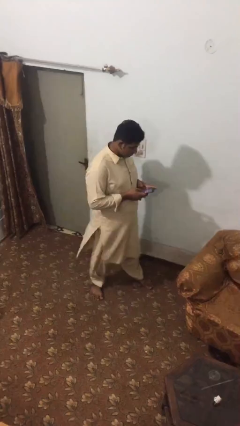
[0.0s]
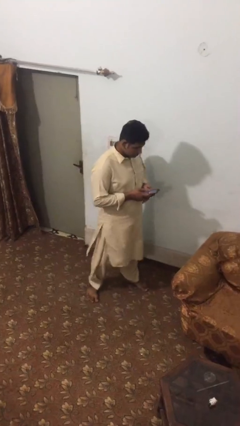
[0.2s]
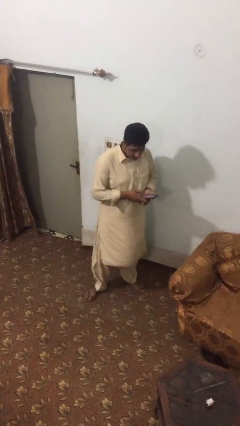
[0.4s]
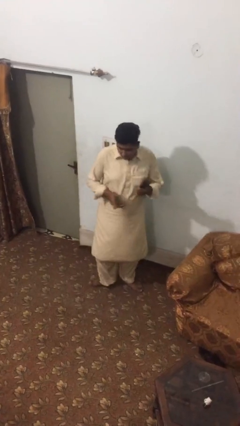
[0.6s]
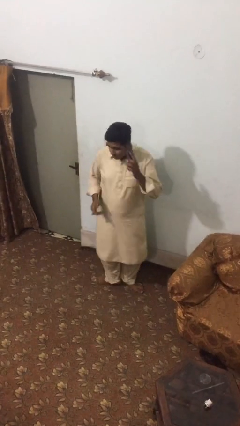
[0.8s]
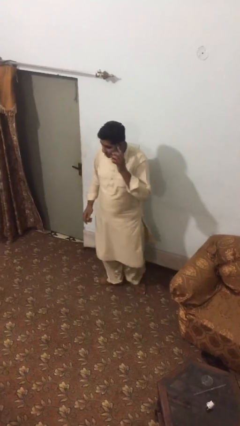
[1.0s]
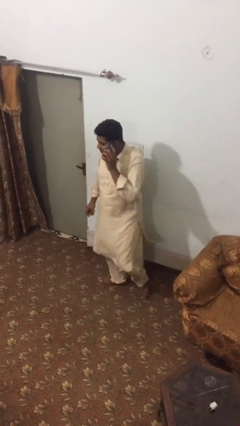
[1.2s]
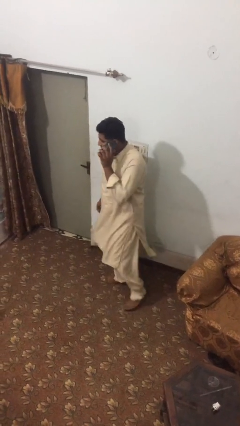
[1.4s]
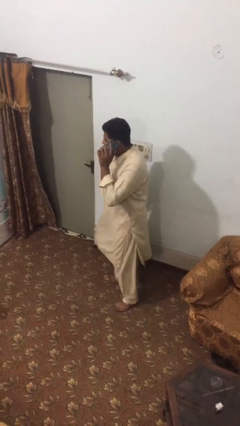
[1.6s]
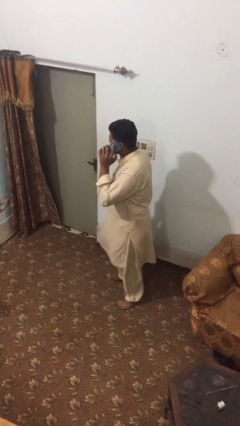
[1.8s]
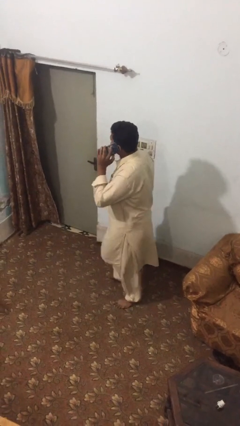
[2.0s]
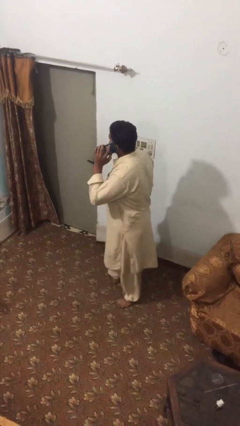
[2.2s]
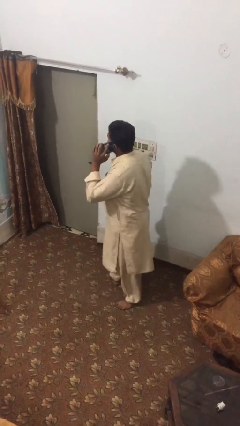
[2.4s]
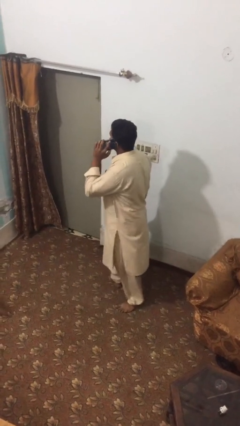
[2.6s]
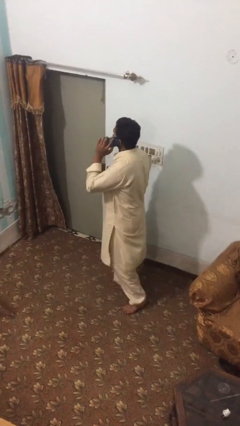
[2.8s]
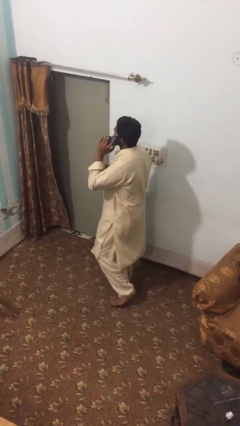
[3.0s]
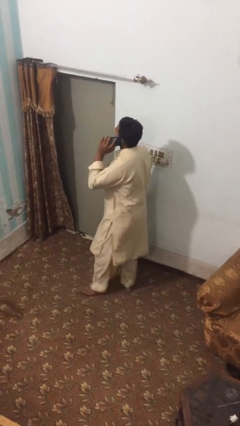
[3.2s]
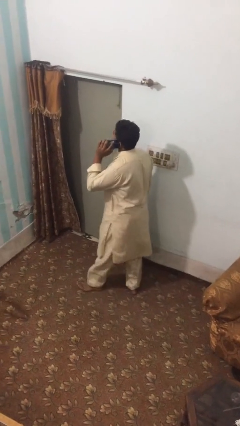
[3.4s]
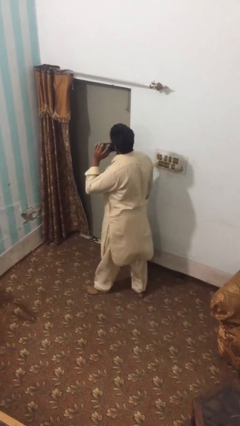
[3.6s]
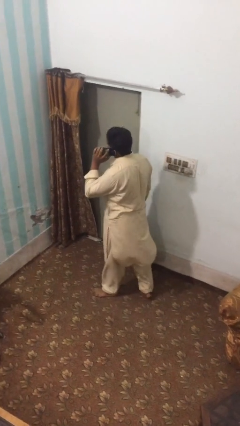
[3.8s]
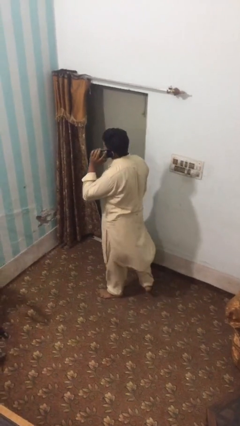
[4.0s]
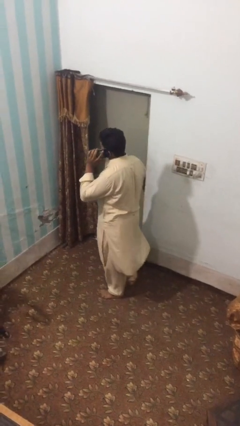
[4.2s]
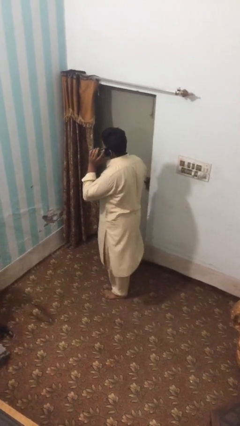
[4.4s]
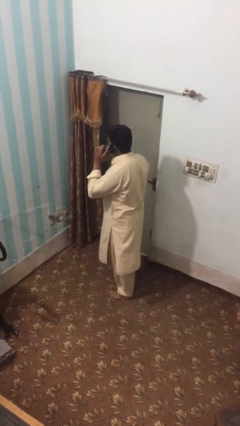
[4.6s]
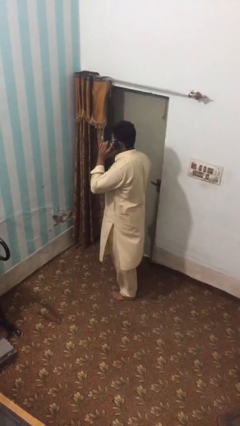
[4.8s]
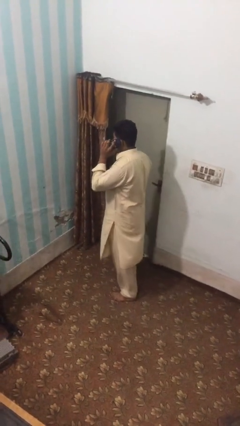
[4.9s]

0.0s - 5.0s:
person talks on phone

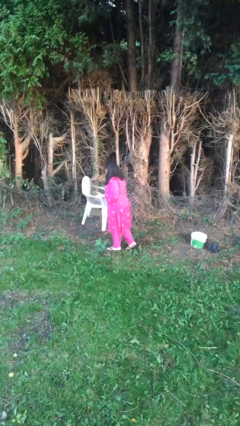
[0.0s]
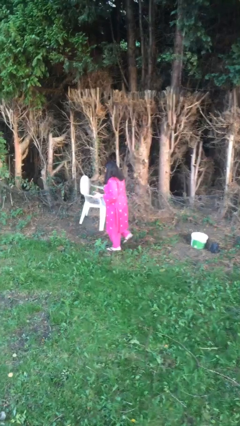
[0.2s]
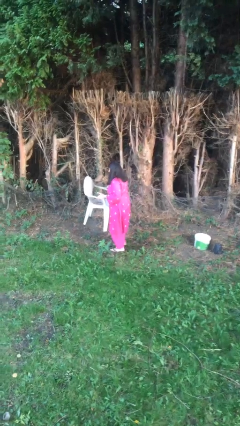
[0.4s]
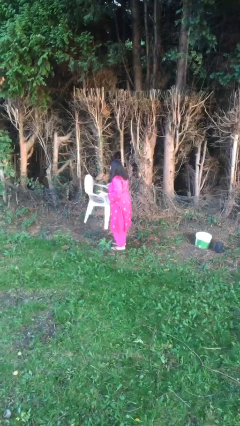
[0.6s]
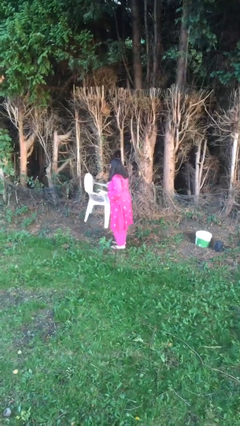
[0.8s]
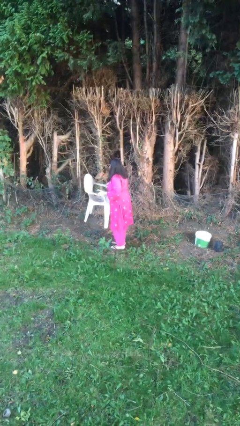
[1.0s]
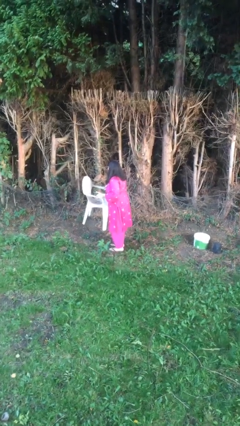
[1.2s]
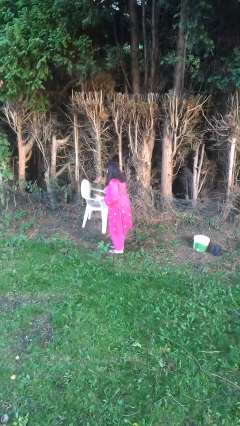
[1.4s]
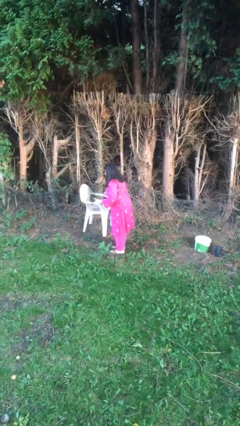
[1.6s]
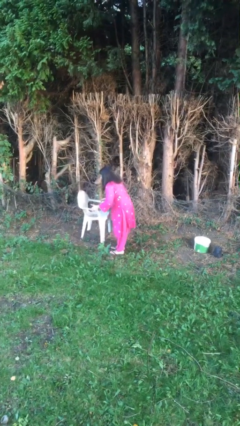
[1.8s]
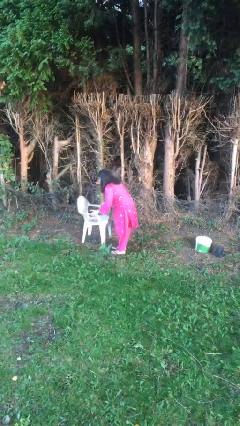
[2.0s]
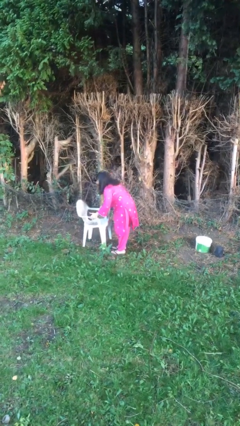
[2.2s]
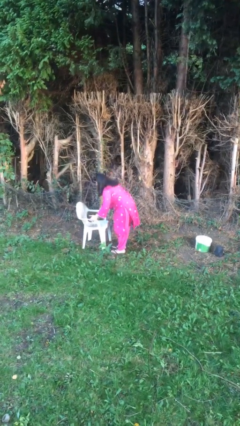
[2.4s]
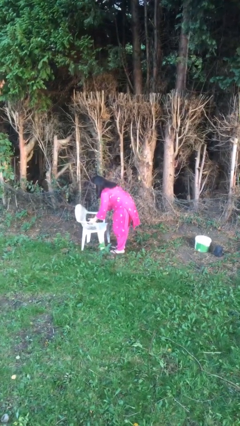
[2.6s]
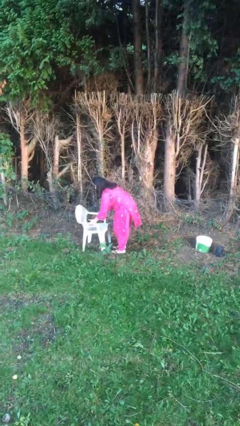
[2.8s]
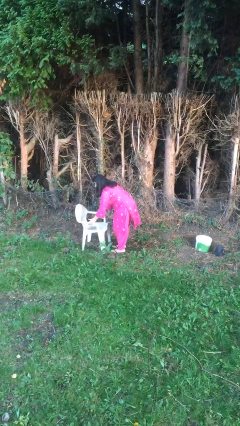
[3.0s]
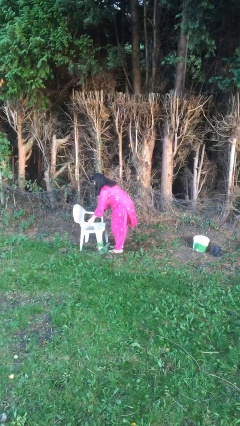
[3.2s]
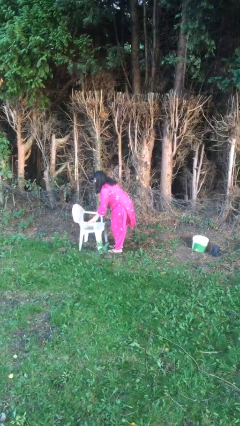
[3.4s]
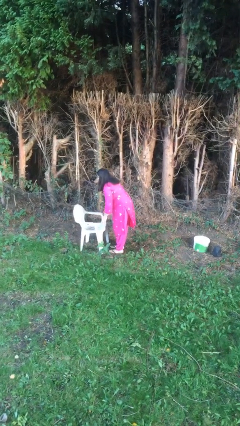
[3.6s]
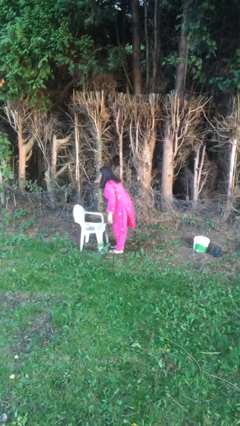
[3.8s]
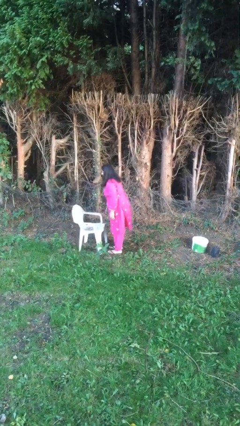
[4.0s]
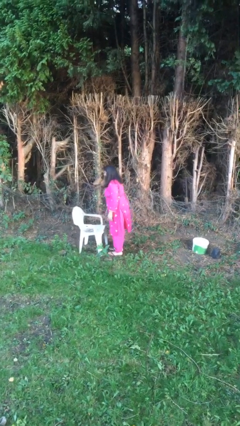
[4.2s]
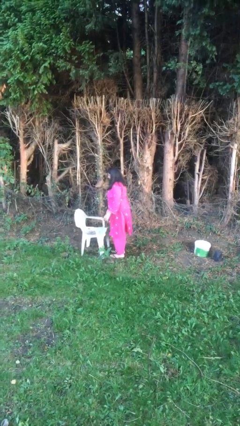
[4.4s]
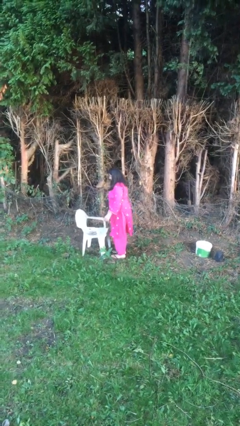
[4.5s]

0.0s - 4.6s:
person puts down object on floor

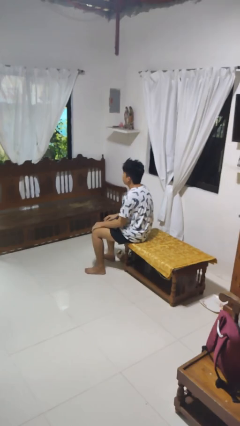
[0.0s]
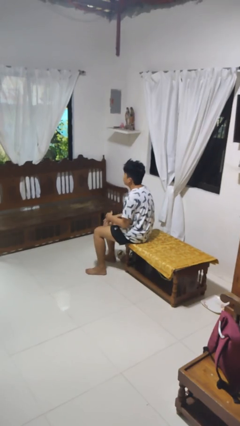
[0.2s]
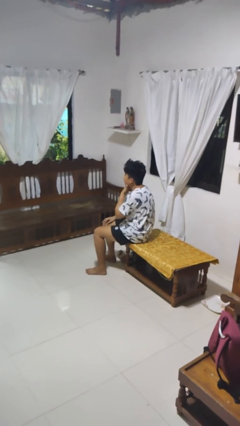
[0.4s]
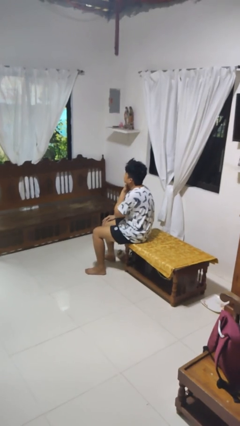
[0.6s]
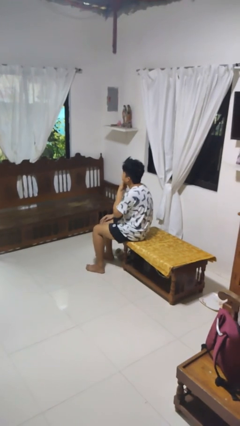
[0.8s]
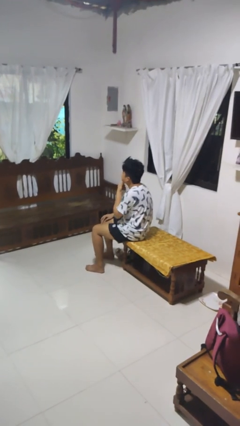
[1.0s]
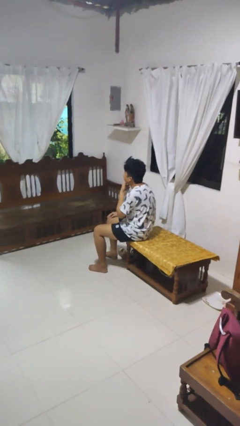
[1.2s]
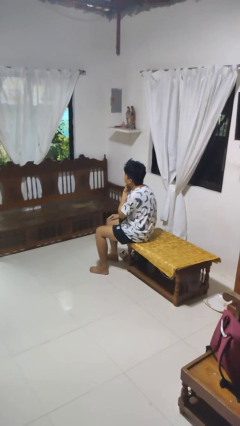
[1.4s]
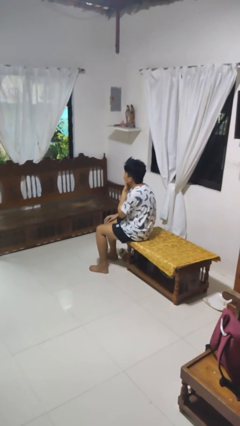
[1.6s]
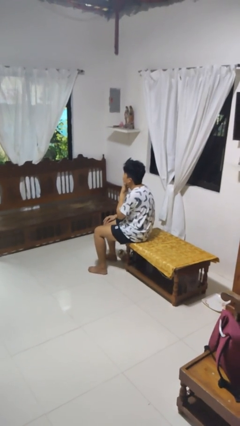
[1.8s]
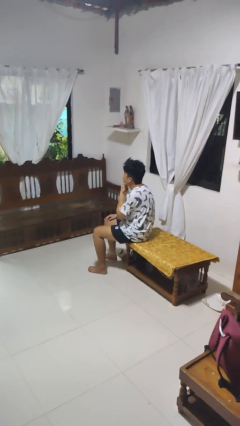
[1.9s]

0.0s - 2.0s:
person strokes chin

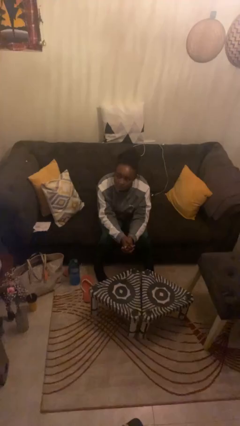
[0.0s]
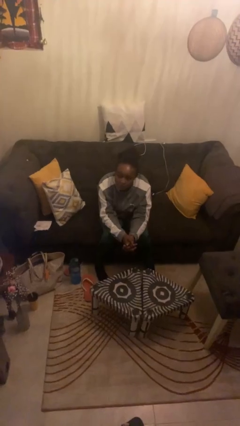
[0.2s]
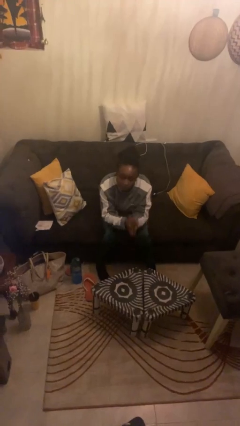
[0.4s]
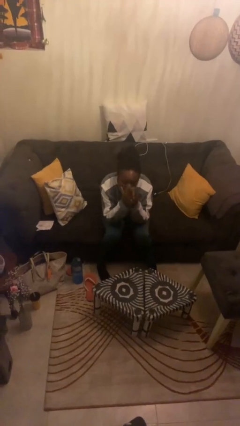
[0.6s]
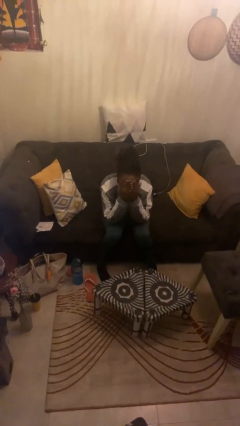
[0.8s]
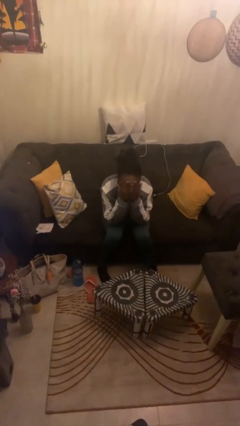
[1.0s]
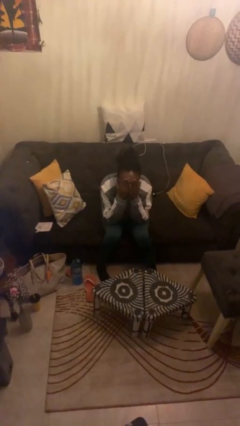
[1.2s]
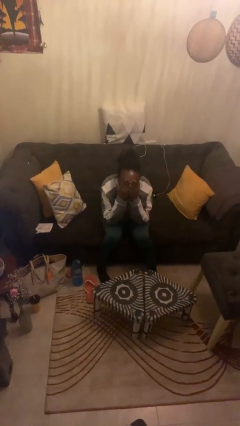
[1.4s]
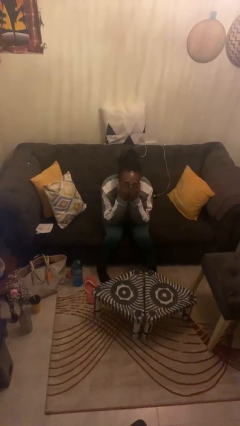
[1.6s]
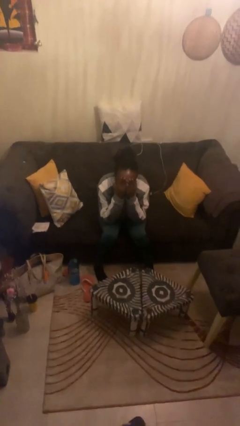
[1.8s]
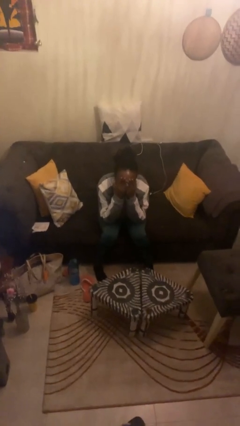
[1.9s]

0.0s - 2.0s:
person covers face with hands

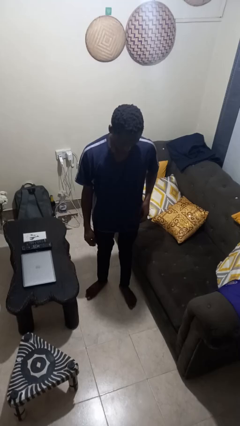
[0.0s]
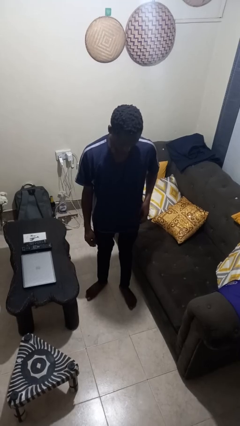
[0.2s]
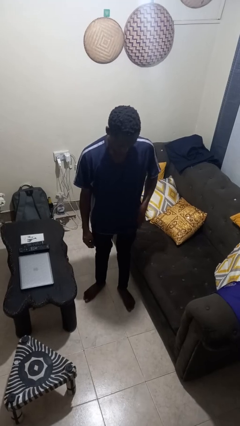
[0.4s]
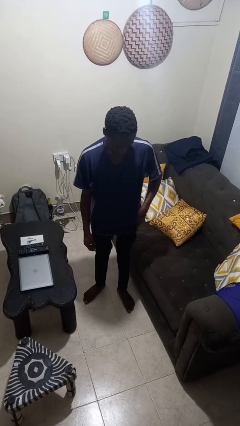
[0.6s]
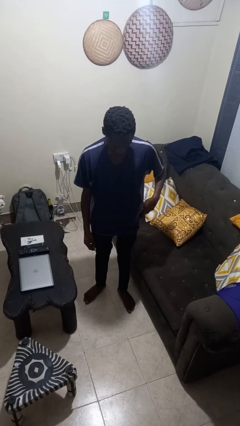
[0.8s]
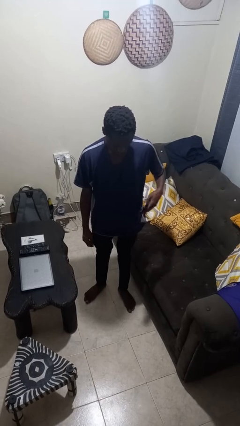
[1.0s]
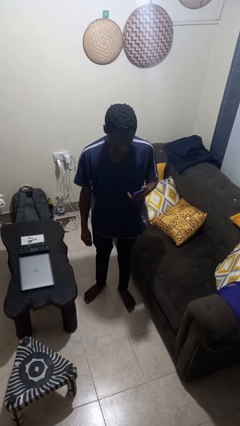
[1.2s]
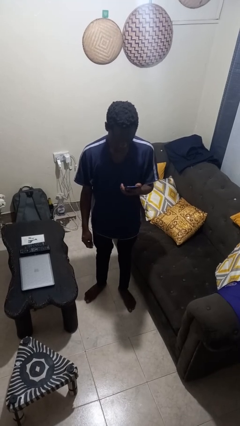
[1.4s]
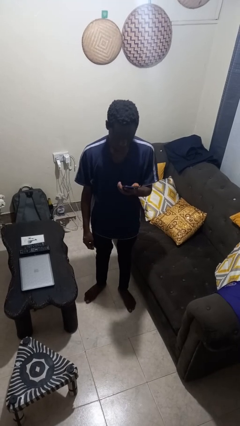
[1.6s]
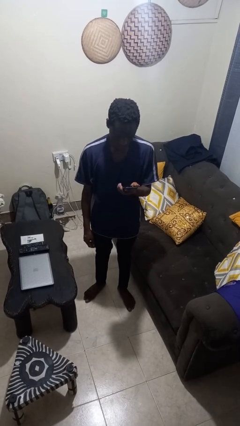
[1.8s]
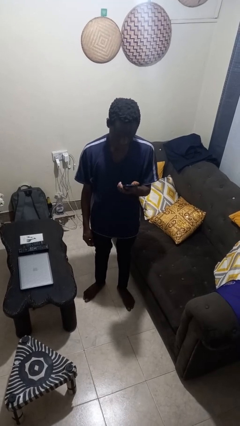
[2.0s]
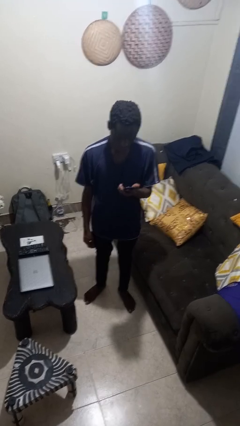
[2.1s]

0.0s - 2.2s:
person takes phone from pocket

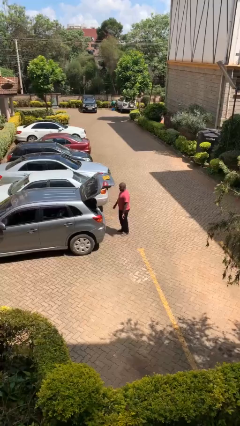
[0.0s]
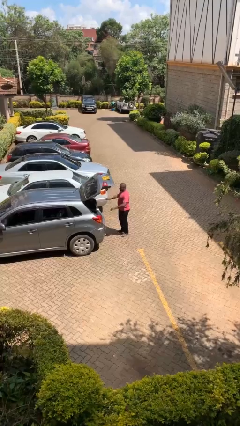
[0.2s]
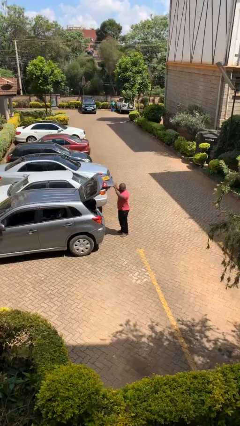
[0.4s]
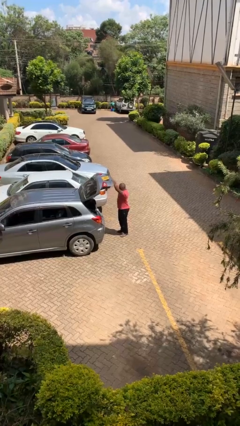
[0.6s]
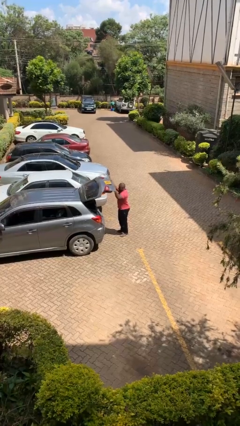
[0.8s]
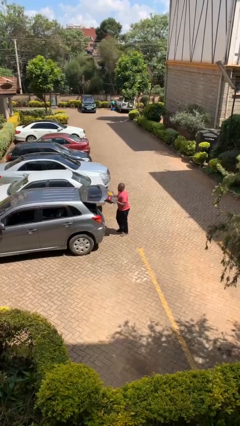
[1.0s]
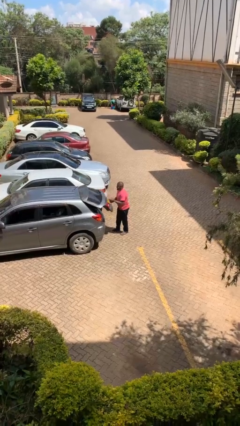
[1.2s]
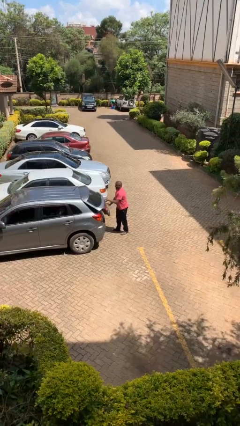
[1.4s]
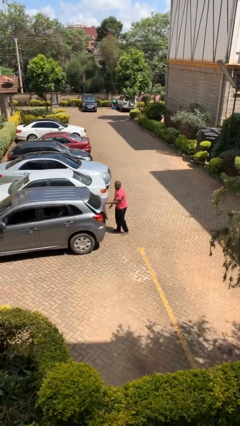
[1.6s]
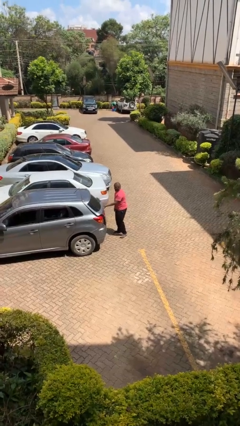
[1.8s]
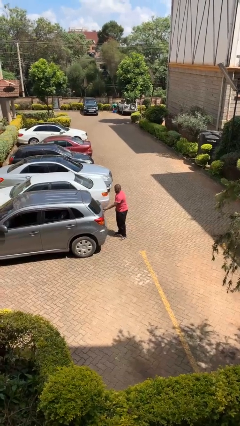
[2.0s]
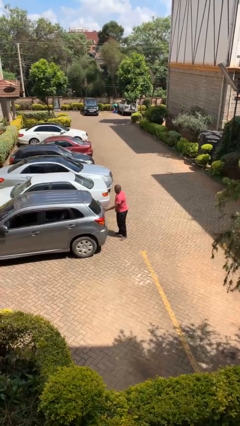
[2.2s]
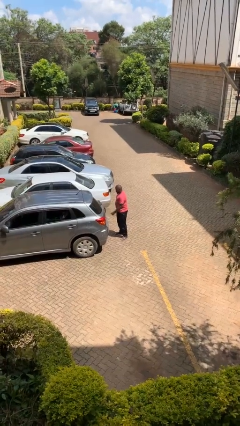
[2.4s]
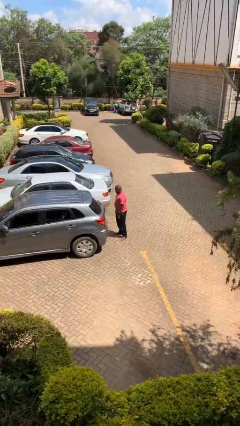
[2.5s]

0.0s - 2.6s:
person closes car trunk
